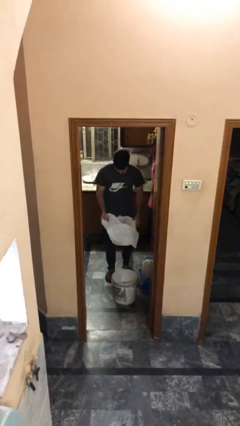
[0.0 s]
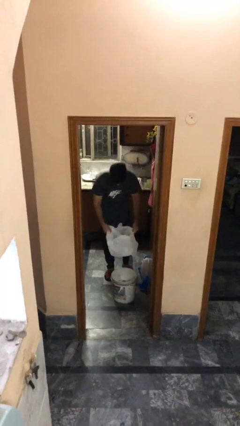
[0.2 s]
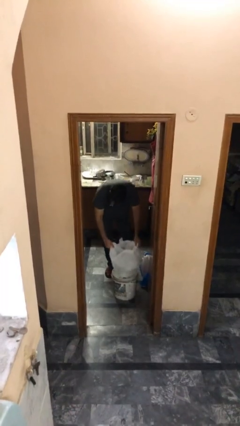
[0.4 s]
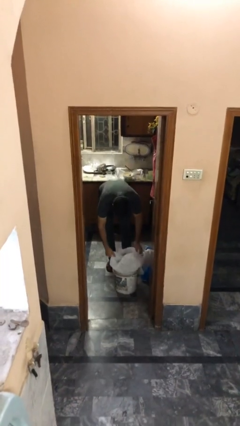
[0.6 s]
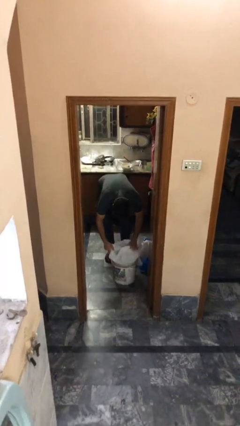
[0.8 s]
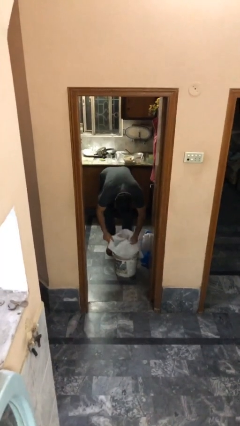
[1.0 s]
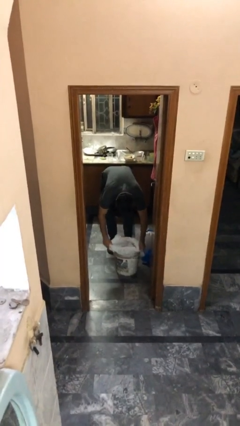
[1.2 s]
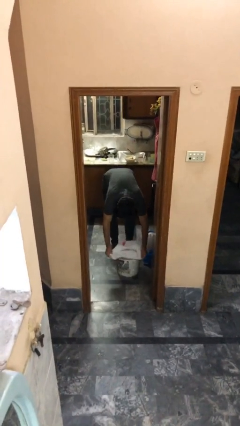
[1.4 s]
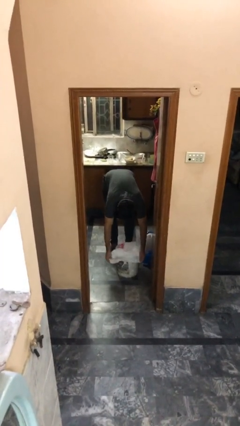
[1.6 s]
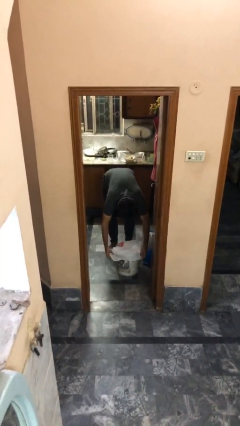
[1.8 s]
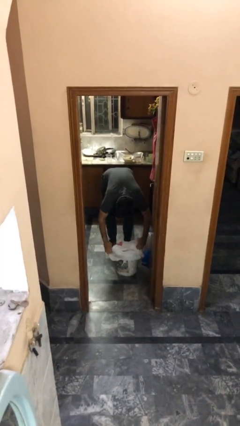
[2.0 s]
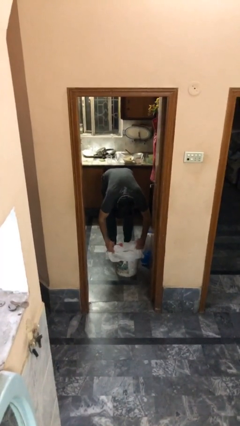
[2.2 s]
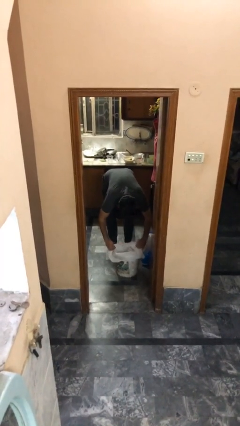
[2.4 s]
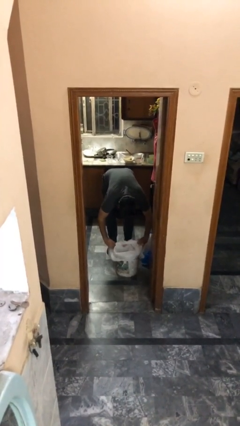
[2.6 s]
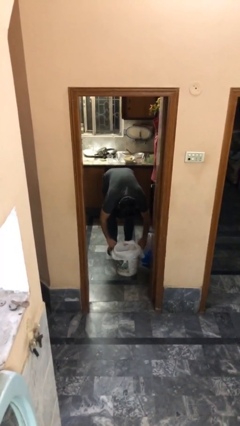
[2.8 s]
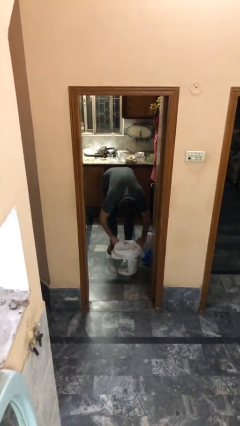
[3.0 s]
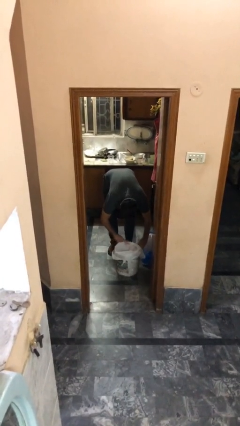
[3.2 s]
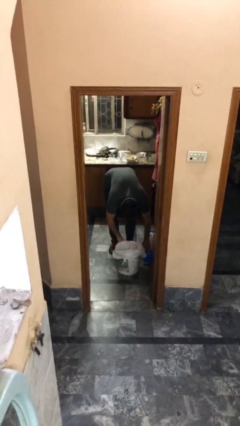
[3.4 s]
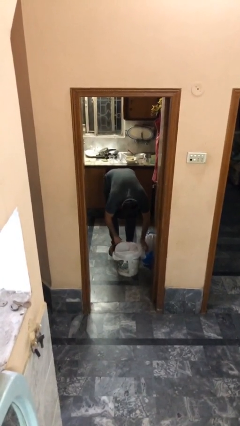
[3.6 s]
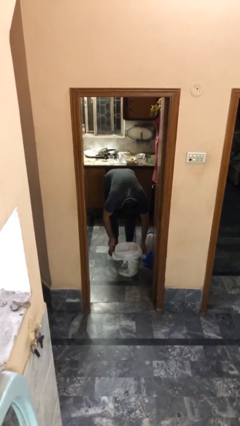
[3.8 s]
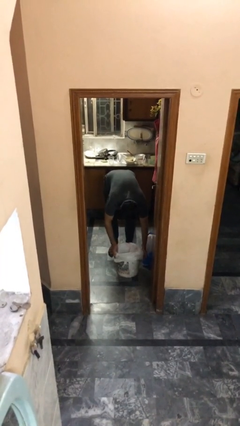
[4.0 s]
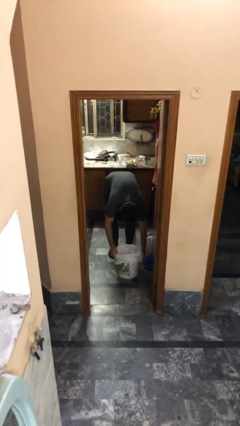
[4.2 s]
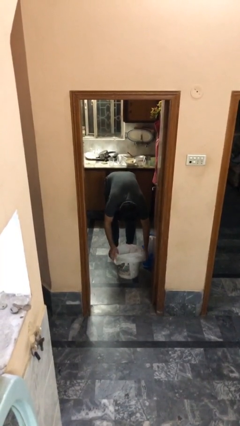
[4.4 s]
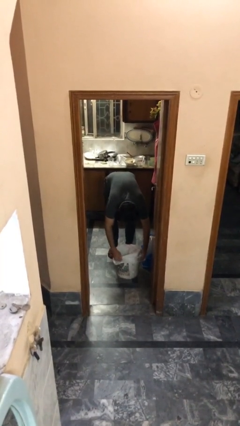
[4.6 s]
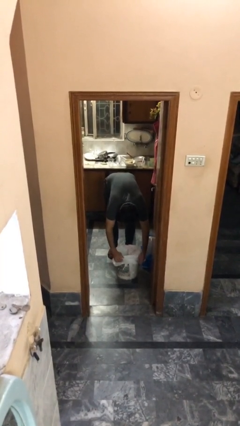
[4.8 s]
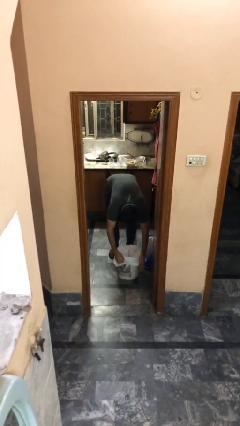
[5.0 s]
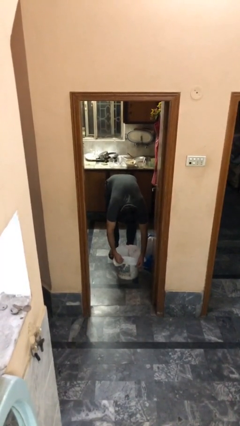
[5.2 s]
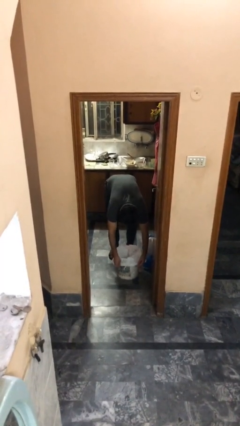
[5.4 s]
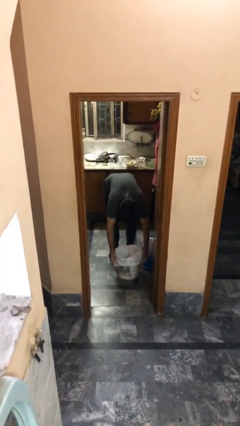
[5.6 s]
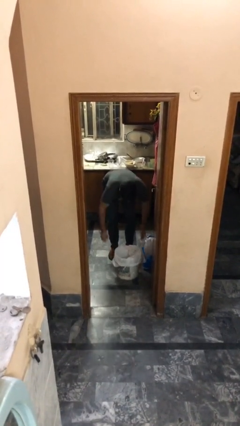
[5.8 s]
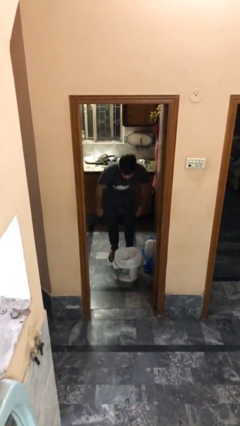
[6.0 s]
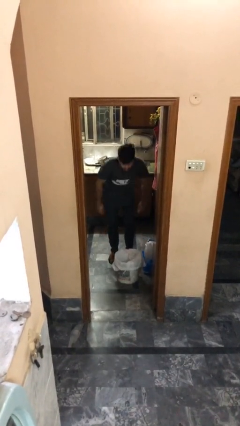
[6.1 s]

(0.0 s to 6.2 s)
person inserts trashbag into trashcan

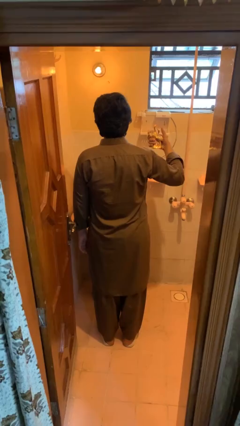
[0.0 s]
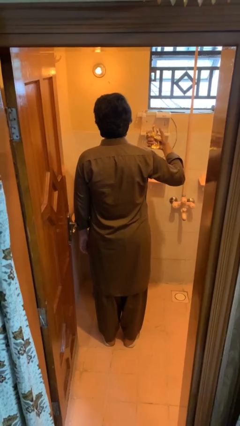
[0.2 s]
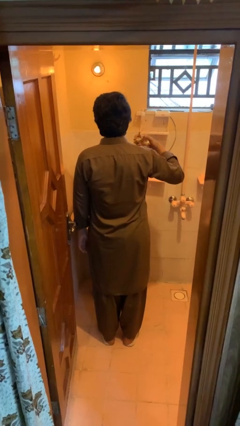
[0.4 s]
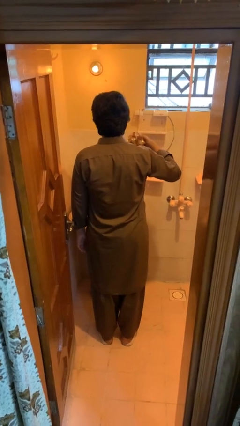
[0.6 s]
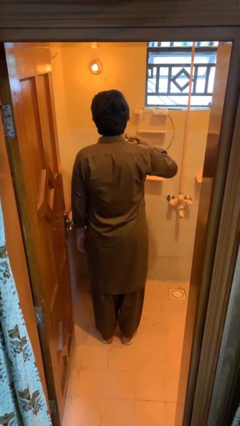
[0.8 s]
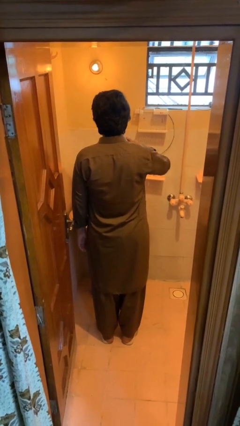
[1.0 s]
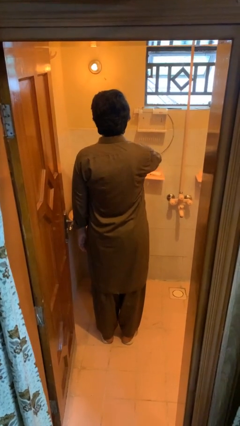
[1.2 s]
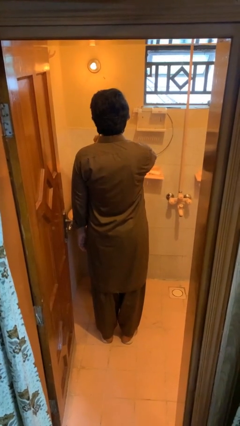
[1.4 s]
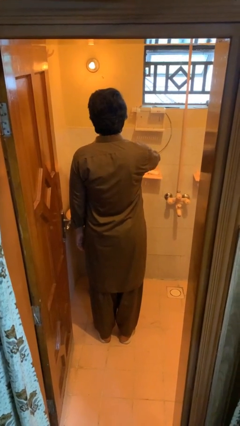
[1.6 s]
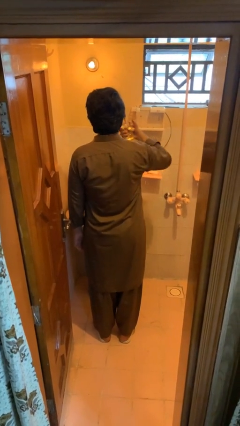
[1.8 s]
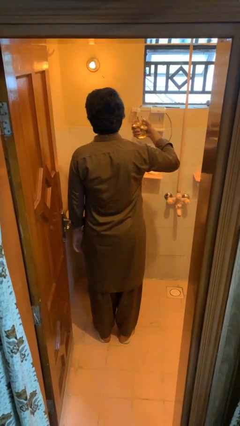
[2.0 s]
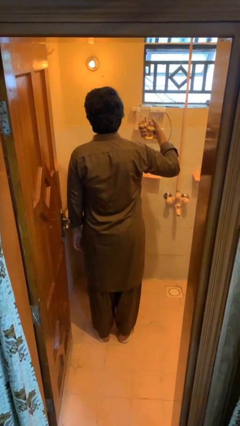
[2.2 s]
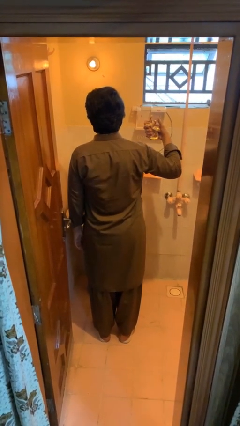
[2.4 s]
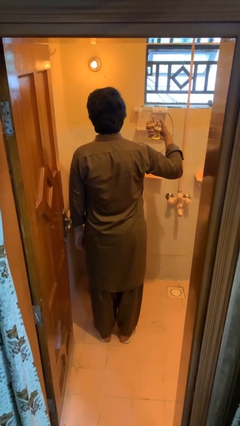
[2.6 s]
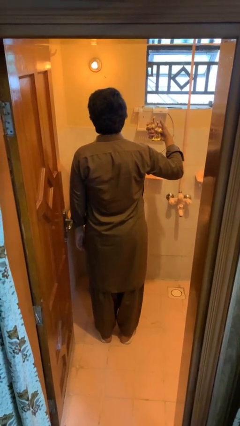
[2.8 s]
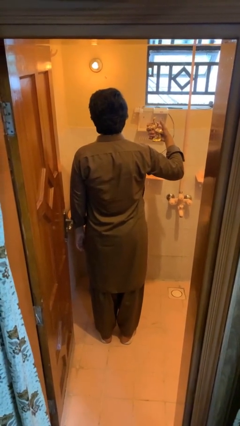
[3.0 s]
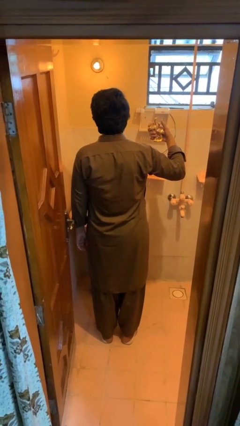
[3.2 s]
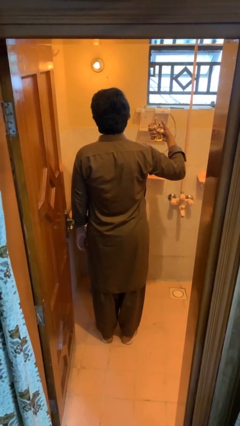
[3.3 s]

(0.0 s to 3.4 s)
person applies deodorant

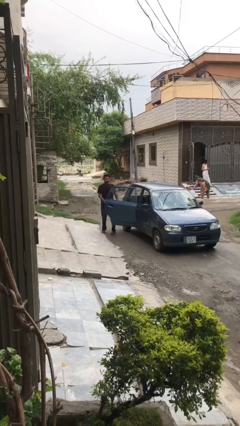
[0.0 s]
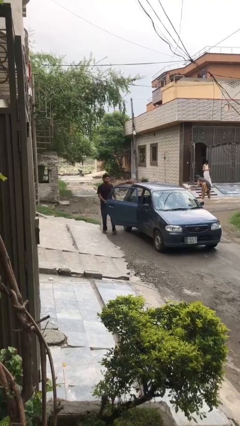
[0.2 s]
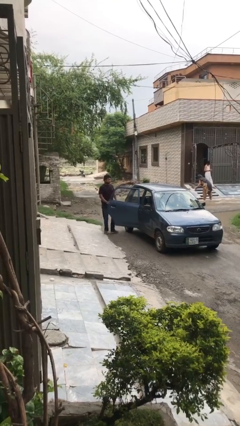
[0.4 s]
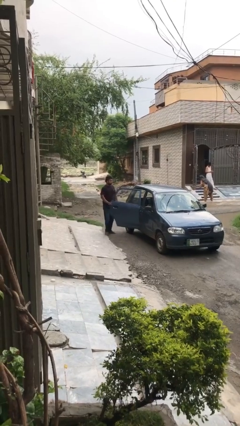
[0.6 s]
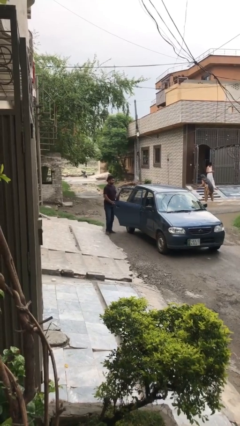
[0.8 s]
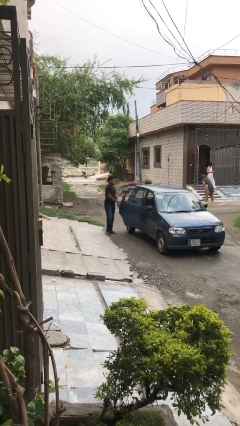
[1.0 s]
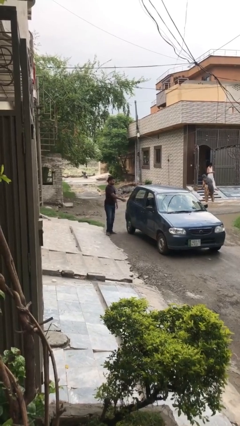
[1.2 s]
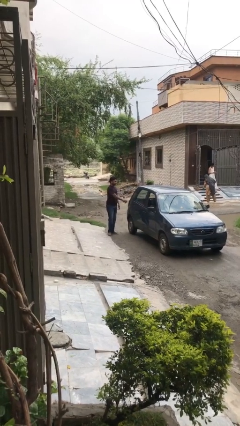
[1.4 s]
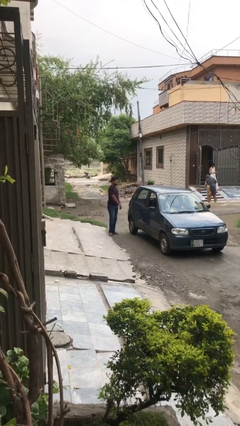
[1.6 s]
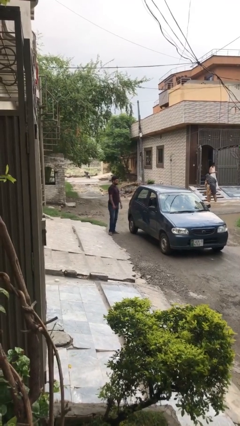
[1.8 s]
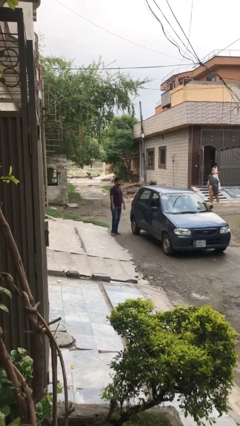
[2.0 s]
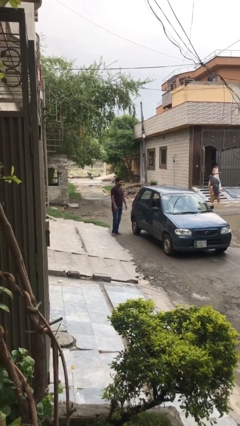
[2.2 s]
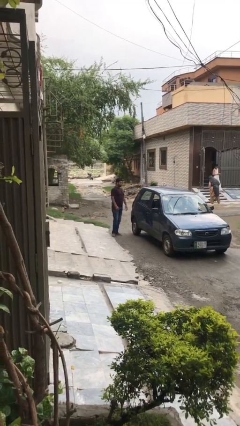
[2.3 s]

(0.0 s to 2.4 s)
person closes car door

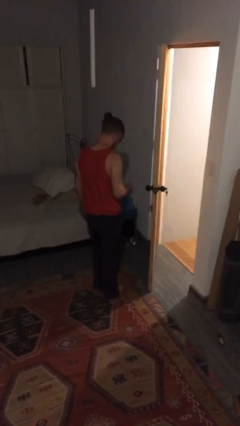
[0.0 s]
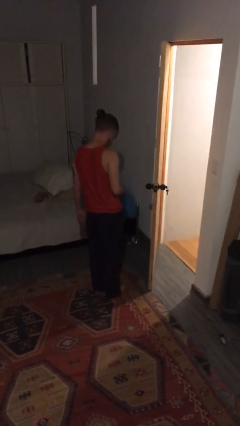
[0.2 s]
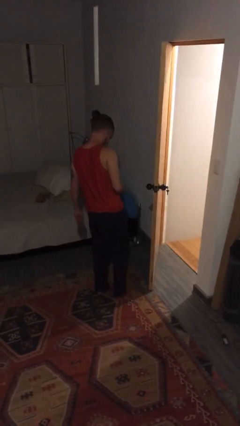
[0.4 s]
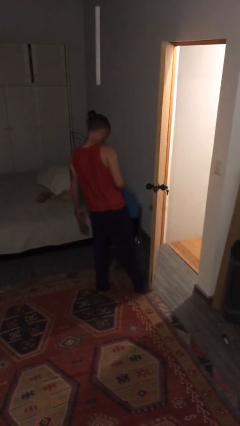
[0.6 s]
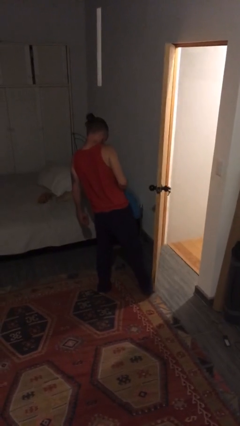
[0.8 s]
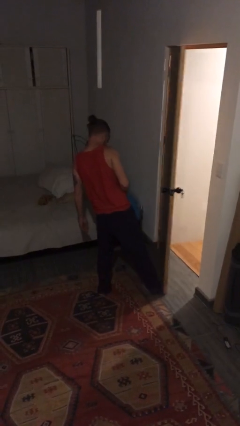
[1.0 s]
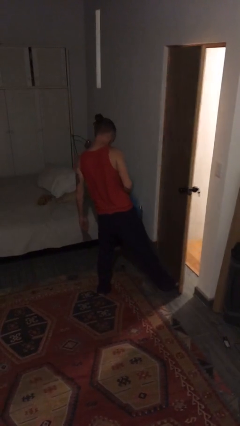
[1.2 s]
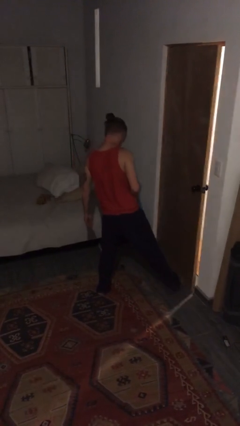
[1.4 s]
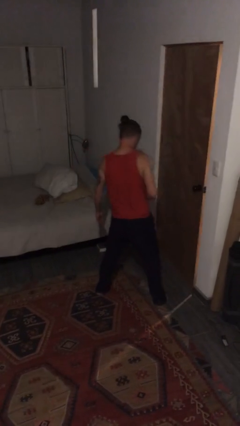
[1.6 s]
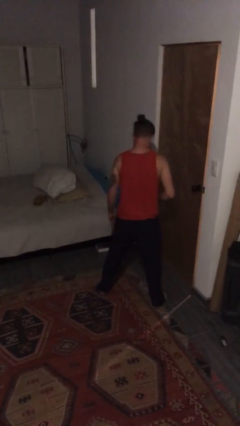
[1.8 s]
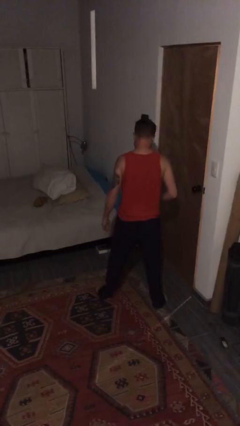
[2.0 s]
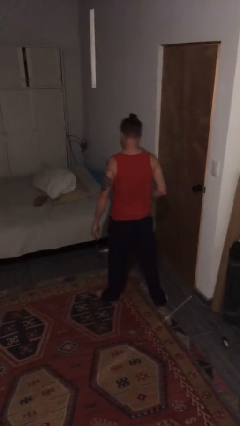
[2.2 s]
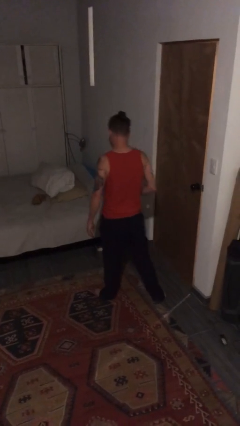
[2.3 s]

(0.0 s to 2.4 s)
person closes door with foot

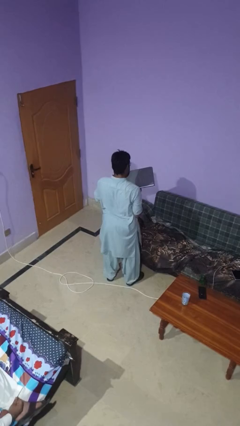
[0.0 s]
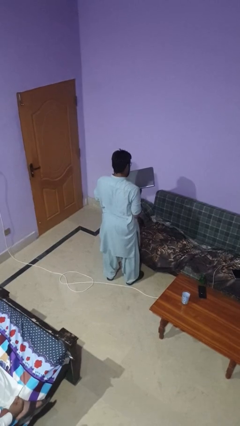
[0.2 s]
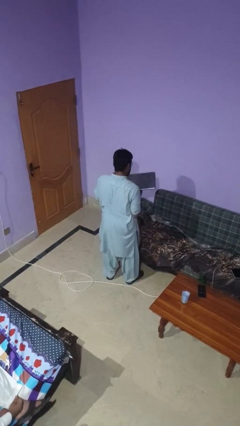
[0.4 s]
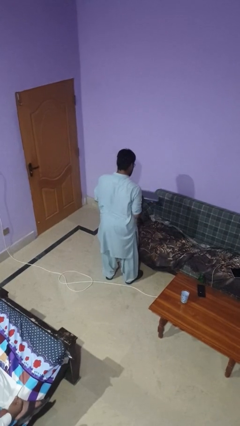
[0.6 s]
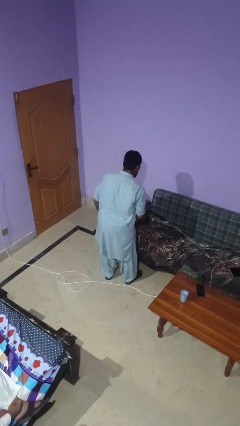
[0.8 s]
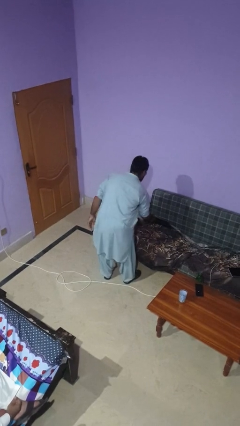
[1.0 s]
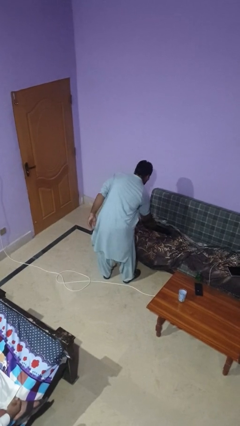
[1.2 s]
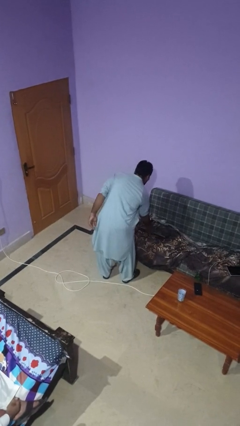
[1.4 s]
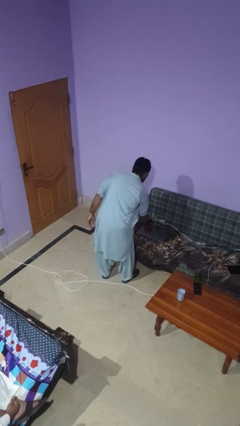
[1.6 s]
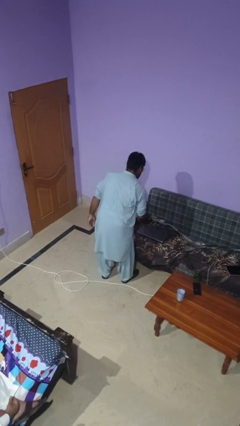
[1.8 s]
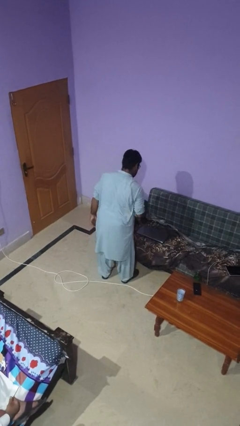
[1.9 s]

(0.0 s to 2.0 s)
person puts down object on couch

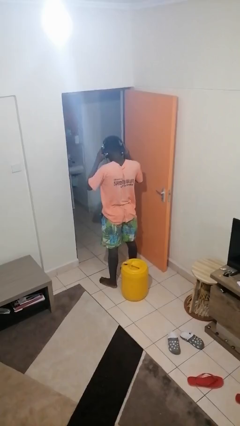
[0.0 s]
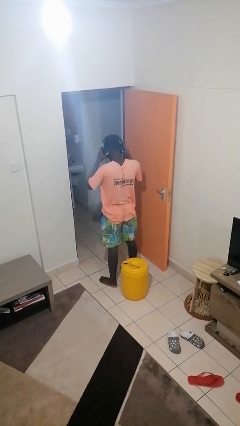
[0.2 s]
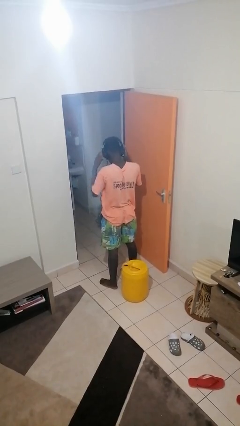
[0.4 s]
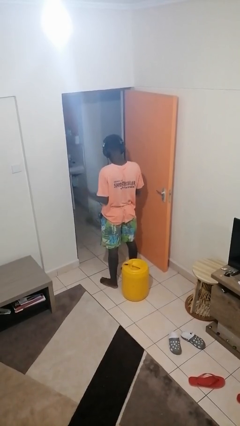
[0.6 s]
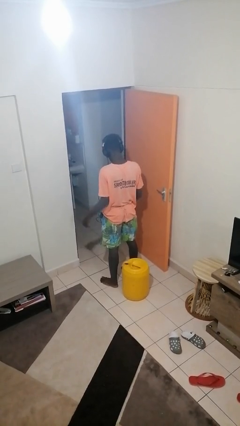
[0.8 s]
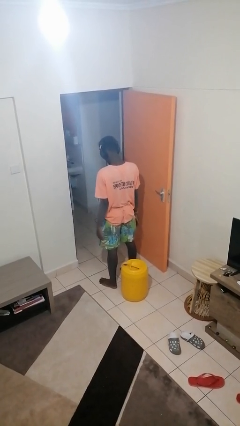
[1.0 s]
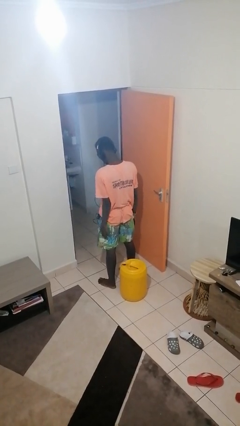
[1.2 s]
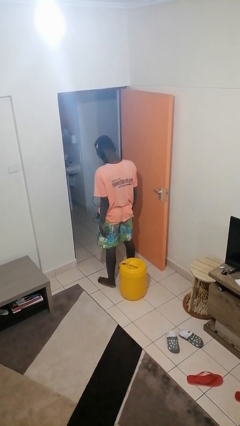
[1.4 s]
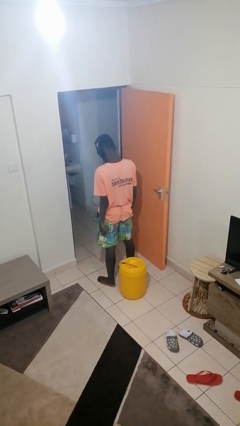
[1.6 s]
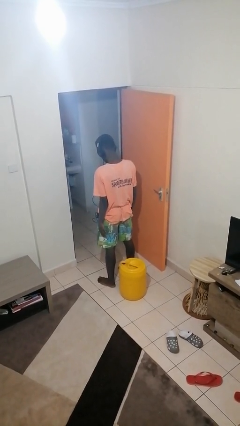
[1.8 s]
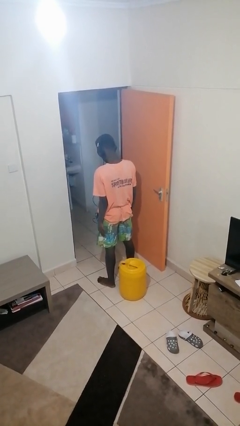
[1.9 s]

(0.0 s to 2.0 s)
person puts on headphones
